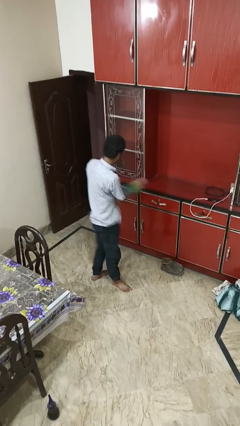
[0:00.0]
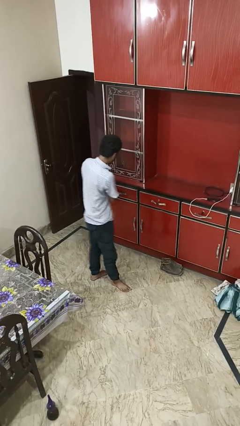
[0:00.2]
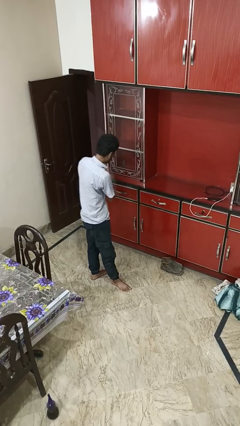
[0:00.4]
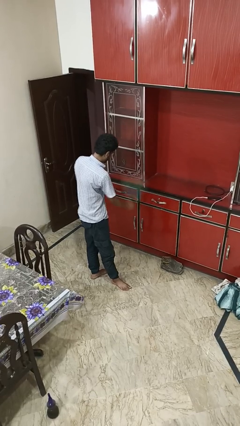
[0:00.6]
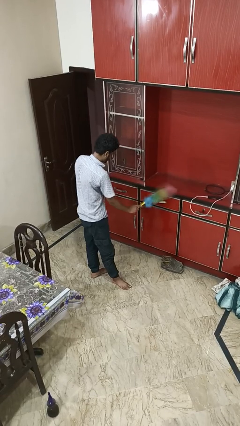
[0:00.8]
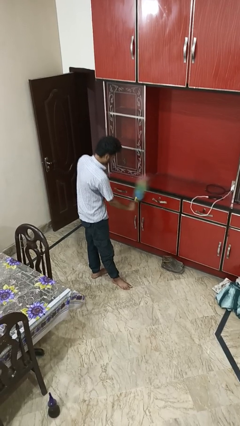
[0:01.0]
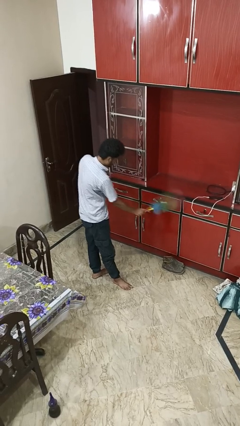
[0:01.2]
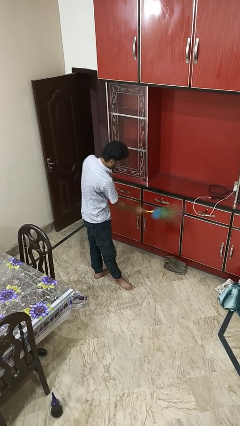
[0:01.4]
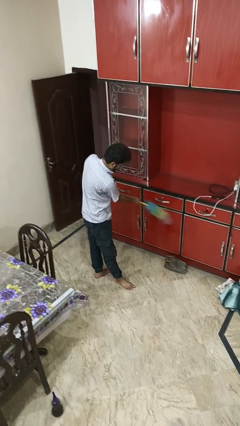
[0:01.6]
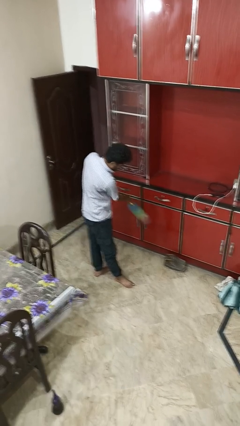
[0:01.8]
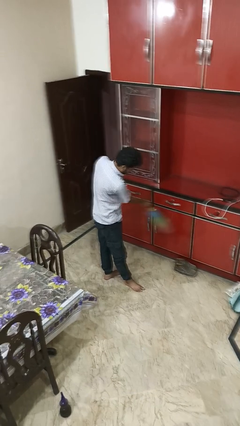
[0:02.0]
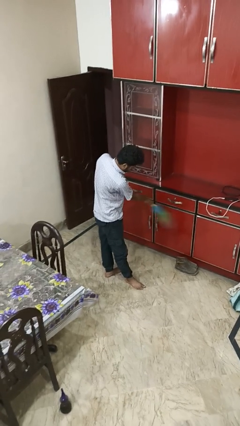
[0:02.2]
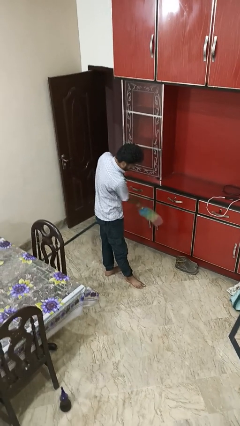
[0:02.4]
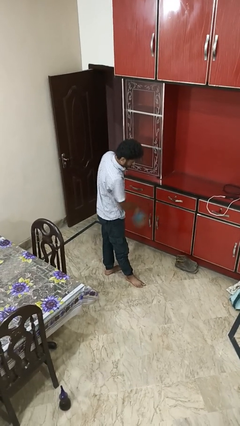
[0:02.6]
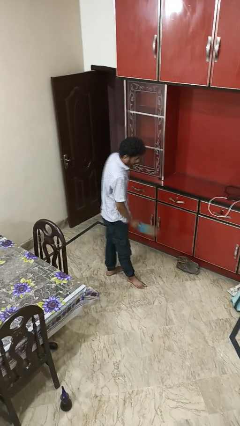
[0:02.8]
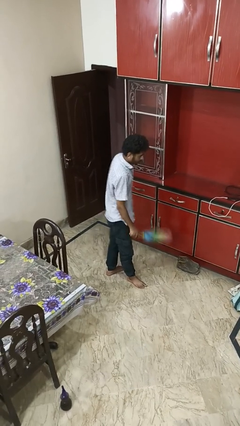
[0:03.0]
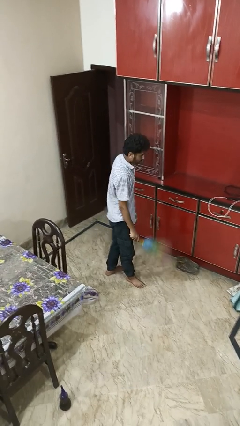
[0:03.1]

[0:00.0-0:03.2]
person dusts furniture

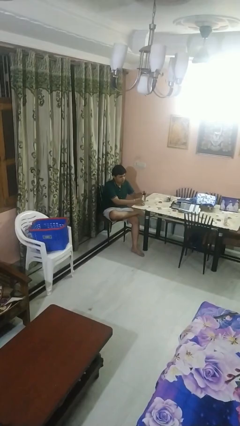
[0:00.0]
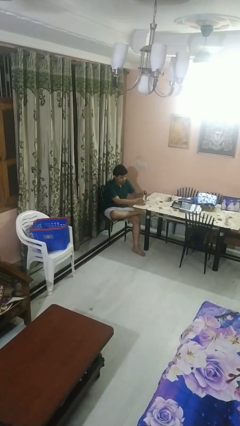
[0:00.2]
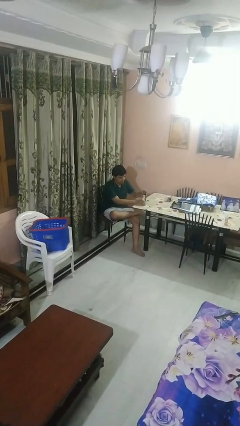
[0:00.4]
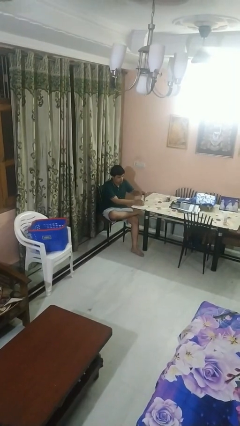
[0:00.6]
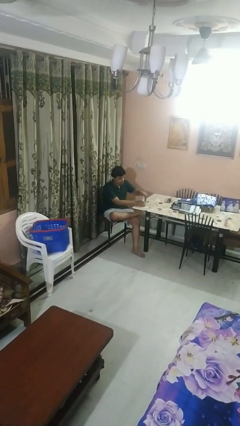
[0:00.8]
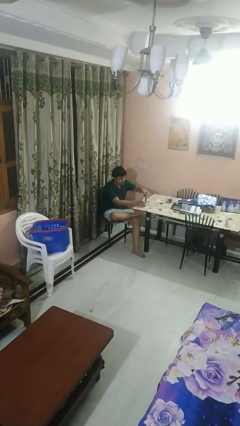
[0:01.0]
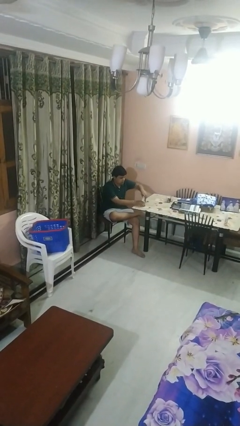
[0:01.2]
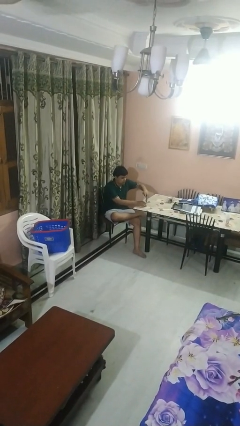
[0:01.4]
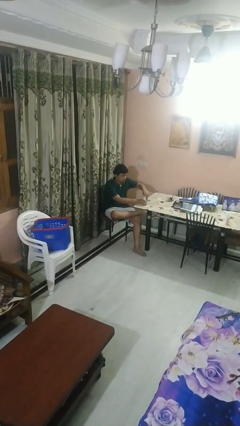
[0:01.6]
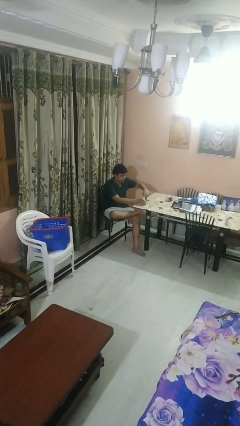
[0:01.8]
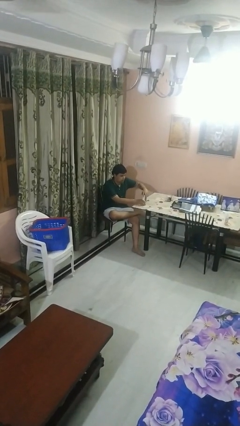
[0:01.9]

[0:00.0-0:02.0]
person screws lid to bottle

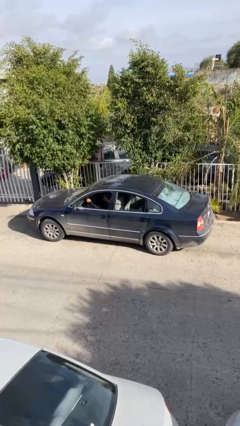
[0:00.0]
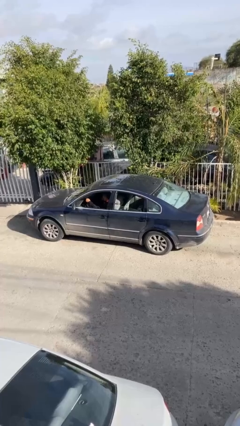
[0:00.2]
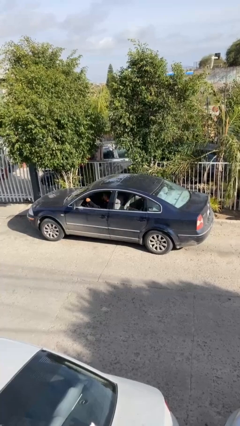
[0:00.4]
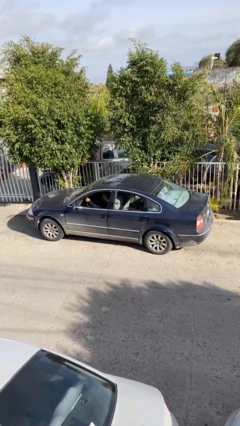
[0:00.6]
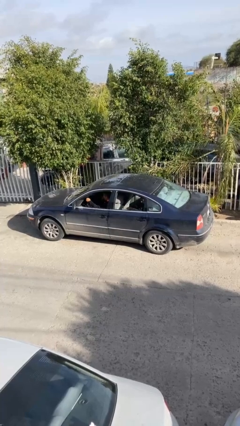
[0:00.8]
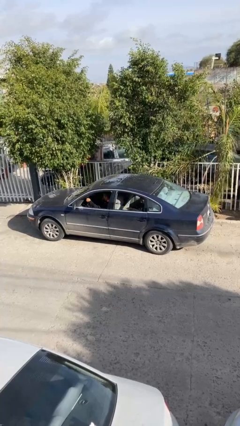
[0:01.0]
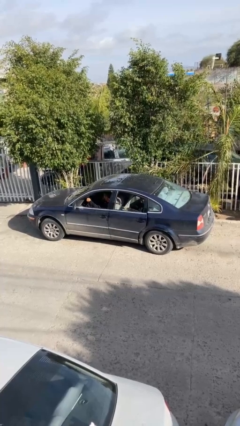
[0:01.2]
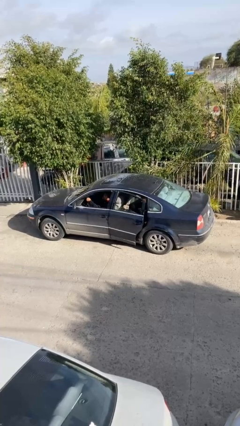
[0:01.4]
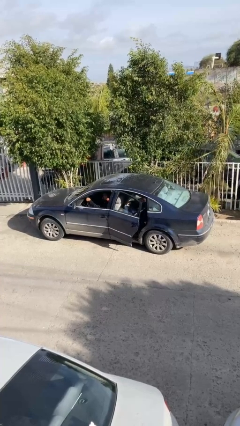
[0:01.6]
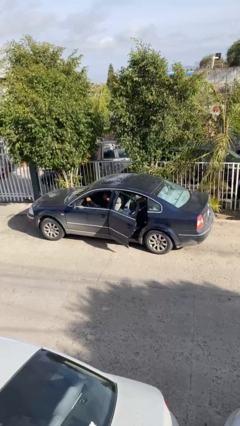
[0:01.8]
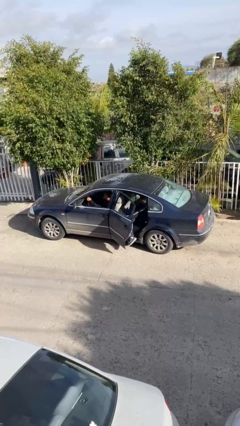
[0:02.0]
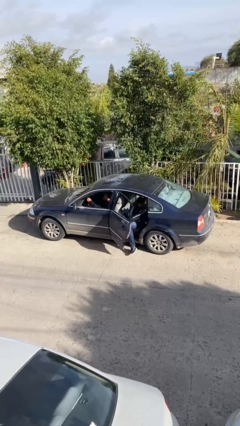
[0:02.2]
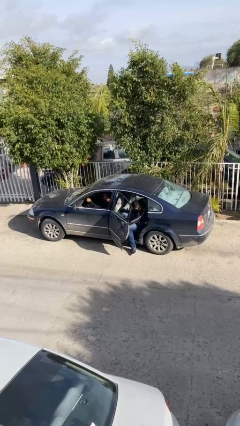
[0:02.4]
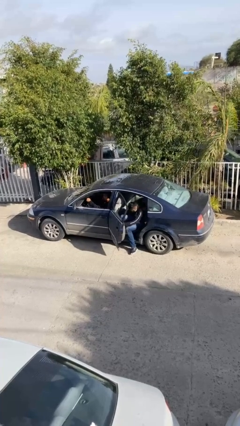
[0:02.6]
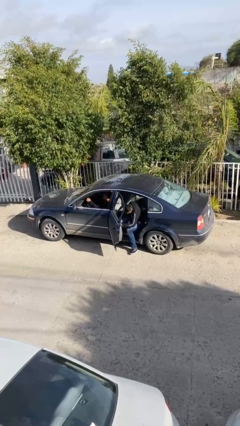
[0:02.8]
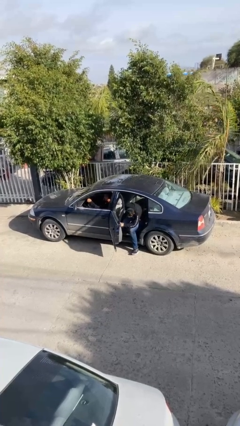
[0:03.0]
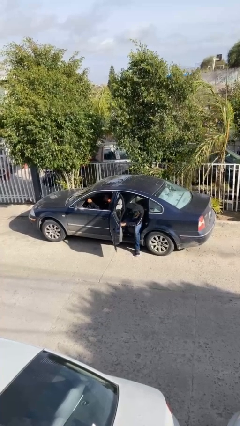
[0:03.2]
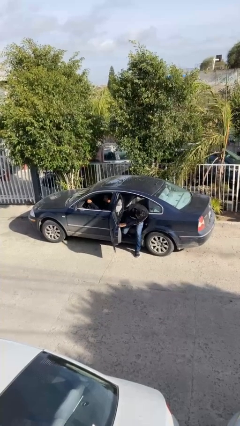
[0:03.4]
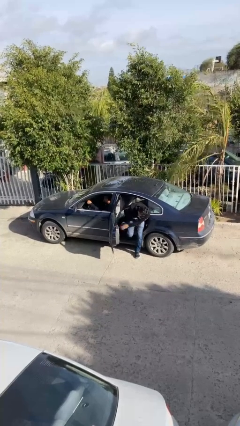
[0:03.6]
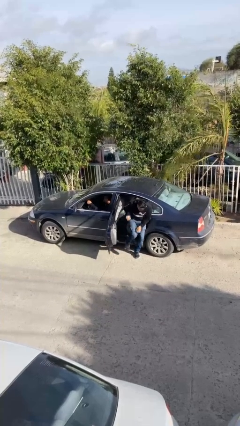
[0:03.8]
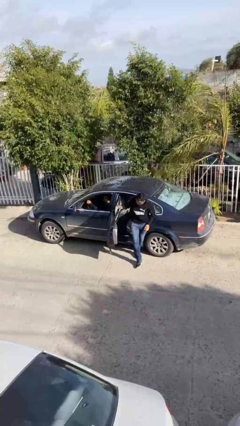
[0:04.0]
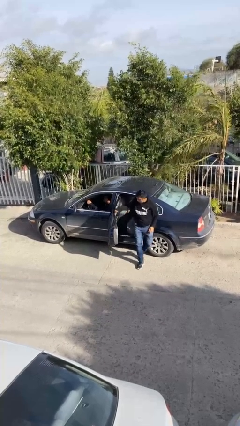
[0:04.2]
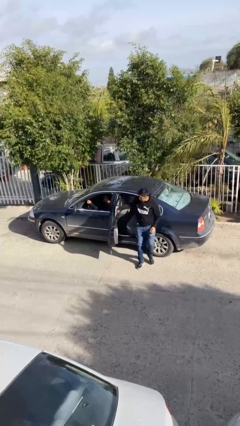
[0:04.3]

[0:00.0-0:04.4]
car drops off person

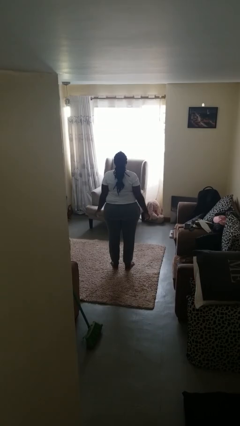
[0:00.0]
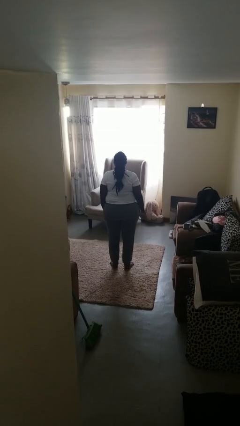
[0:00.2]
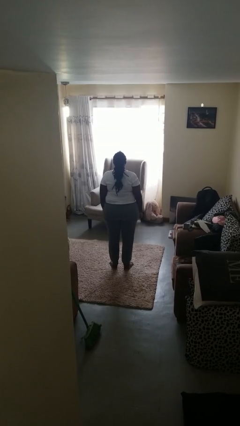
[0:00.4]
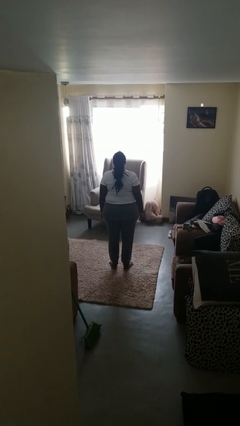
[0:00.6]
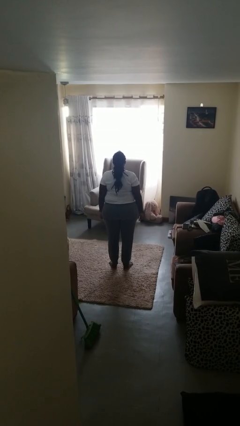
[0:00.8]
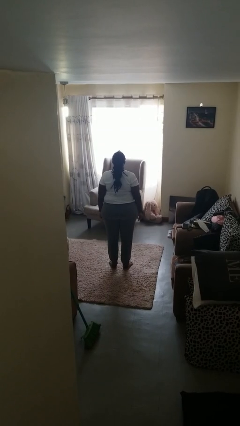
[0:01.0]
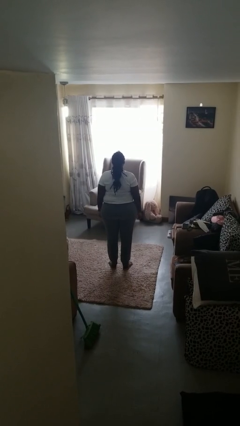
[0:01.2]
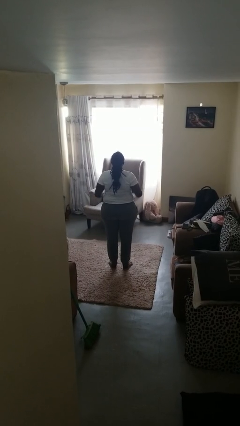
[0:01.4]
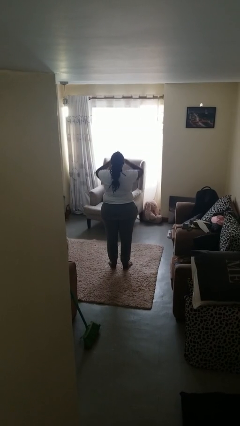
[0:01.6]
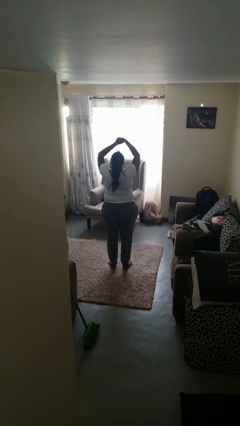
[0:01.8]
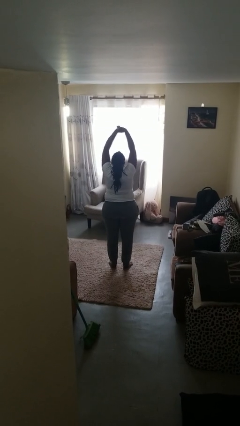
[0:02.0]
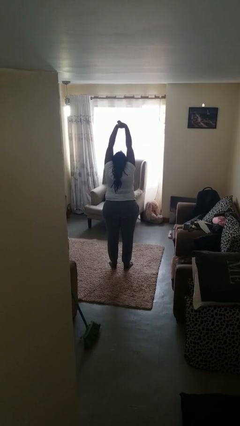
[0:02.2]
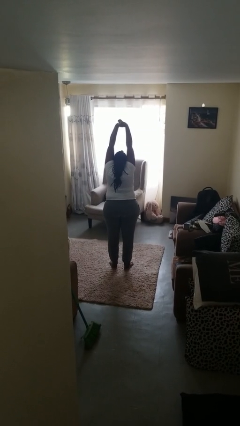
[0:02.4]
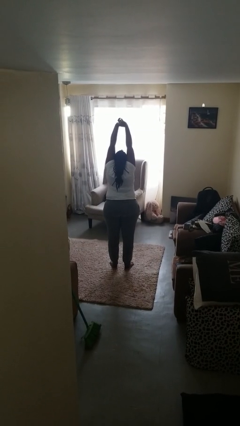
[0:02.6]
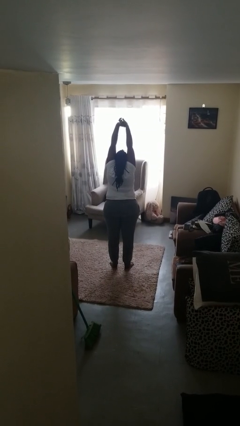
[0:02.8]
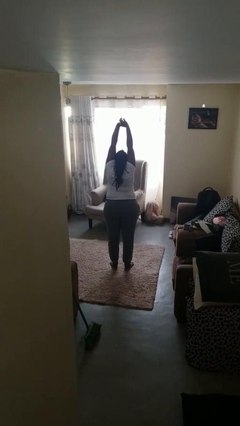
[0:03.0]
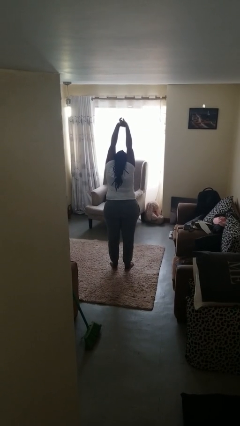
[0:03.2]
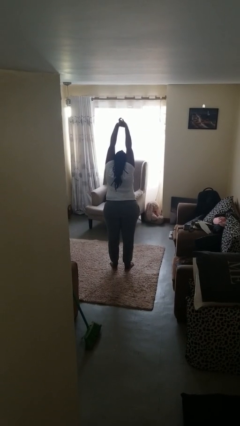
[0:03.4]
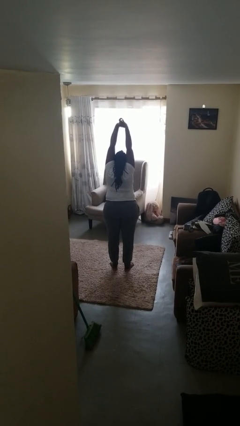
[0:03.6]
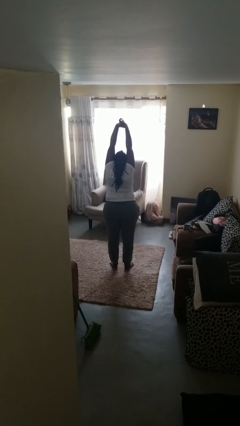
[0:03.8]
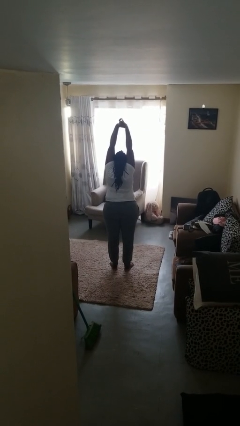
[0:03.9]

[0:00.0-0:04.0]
person stretches arms over head

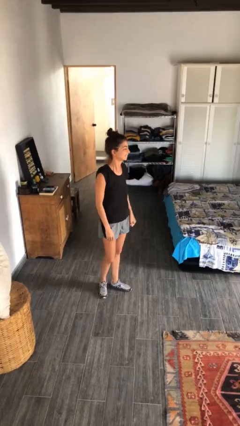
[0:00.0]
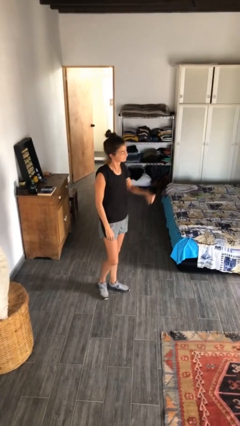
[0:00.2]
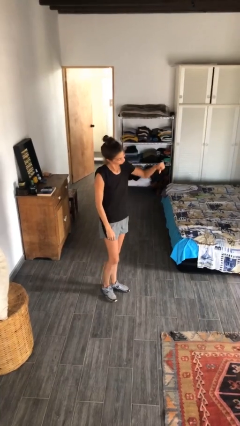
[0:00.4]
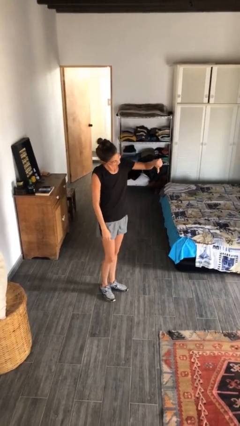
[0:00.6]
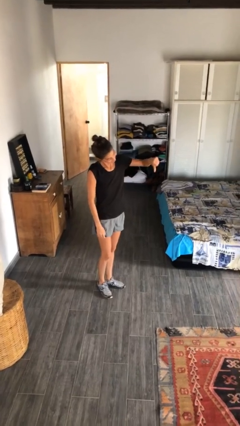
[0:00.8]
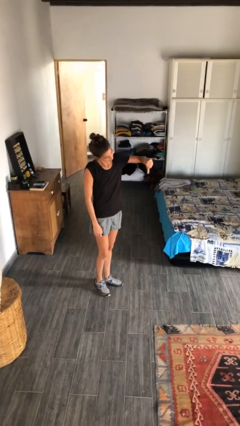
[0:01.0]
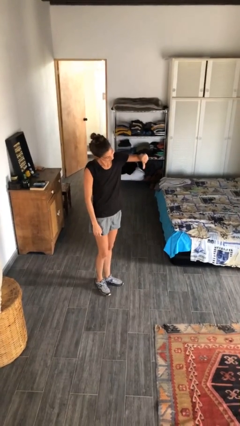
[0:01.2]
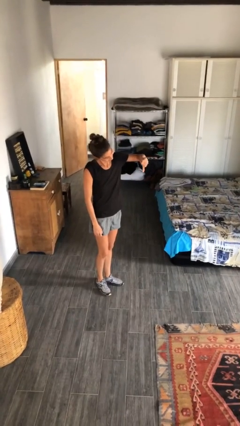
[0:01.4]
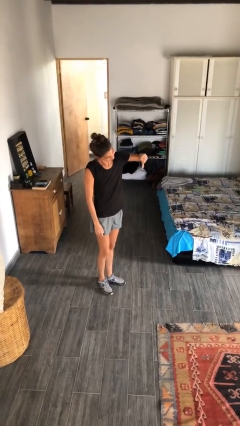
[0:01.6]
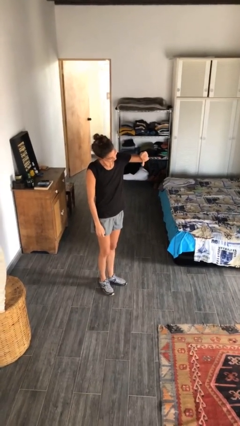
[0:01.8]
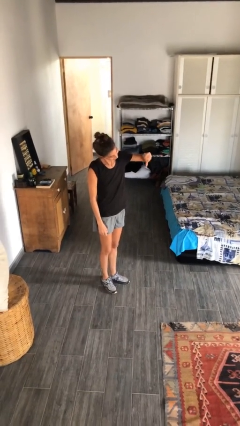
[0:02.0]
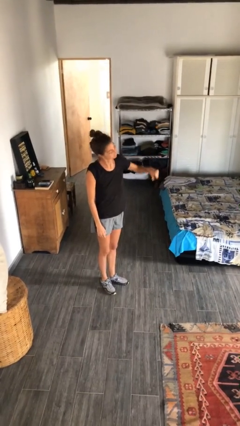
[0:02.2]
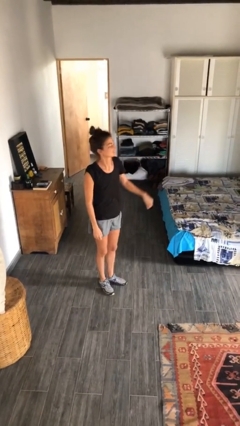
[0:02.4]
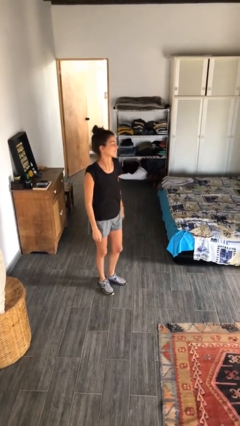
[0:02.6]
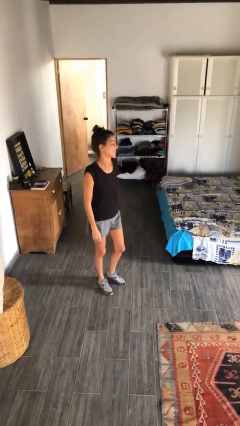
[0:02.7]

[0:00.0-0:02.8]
person gestures thumbs down

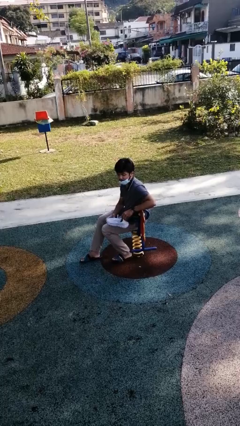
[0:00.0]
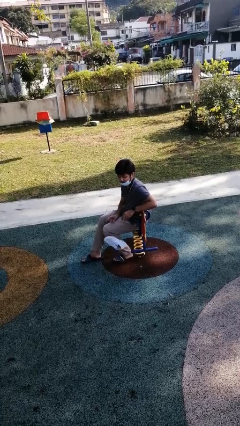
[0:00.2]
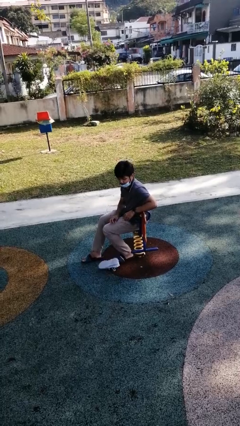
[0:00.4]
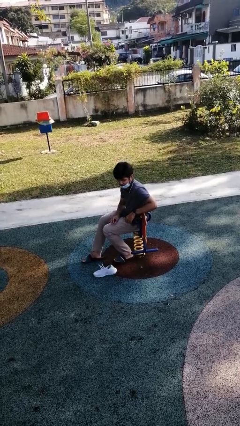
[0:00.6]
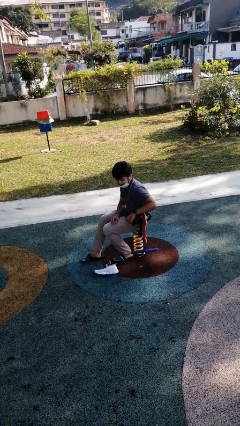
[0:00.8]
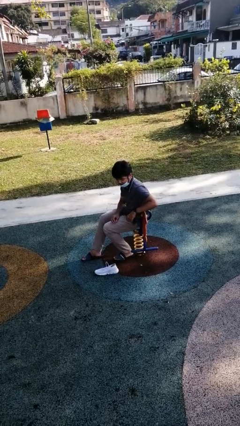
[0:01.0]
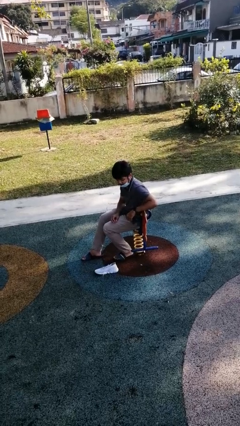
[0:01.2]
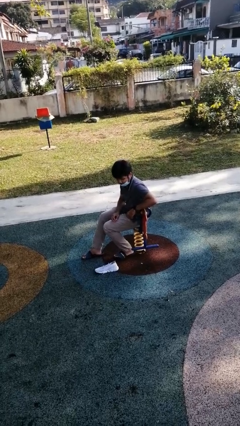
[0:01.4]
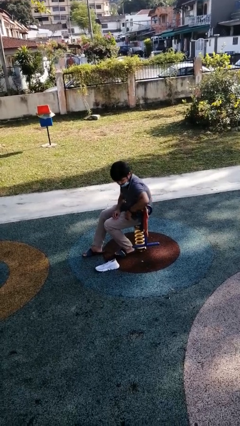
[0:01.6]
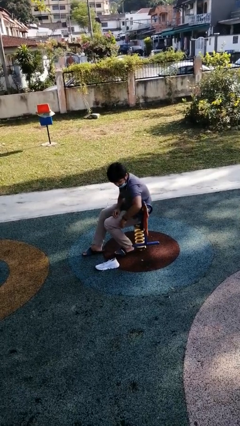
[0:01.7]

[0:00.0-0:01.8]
person drops object
